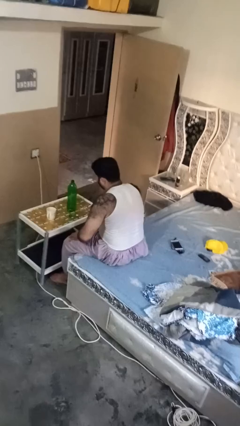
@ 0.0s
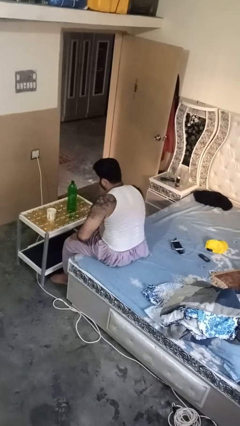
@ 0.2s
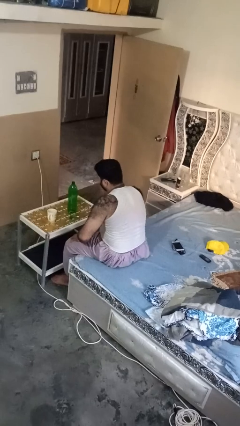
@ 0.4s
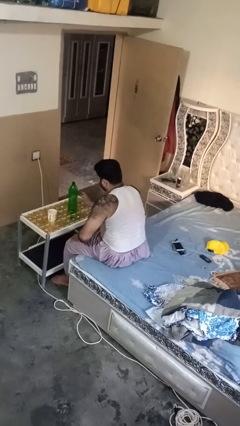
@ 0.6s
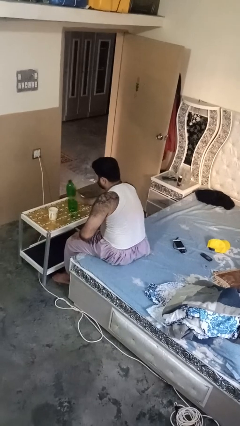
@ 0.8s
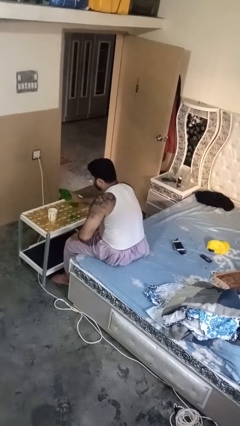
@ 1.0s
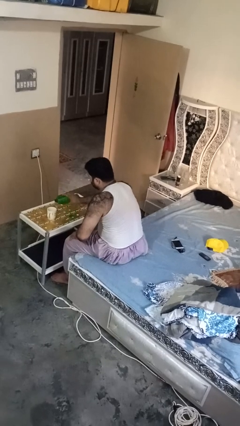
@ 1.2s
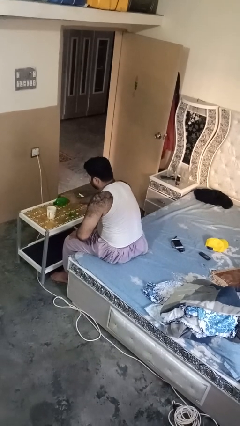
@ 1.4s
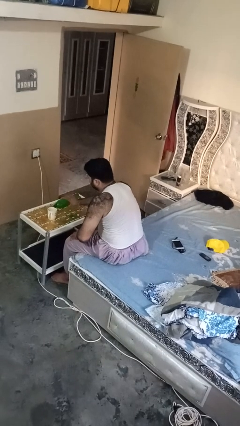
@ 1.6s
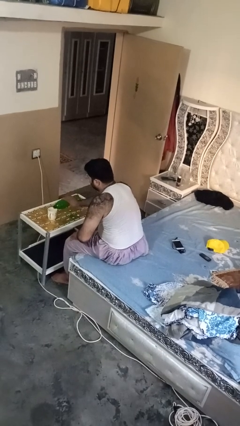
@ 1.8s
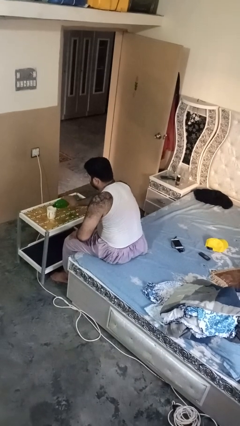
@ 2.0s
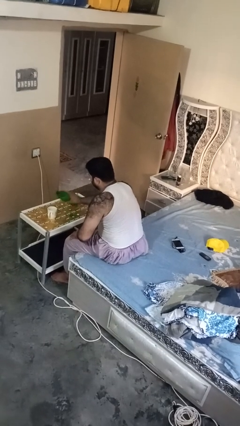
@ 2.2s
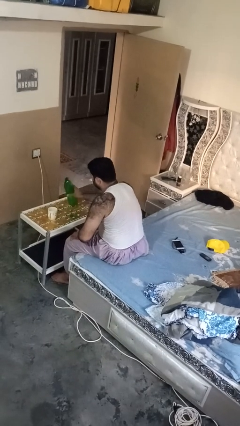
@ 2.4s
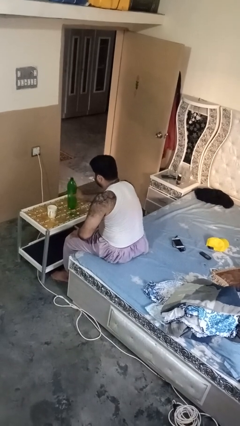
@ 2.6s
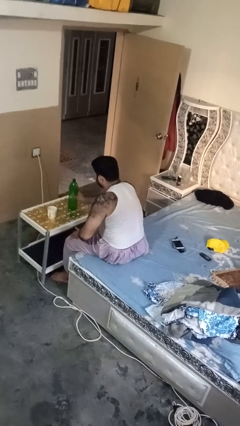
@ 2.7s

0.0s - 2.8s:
person pours liquid into cup

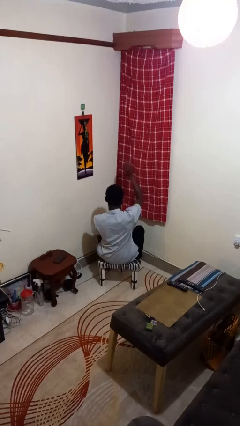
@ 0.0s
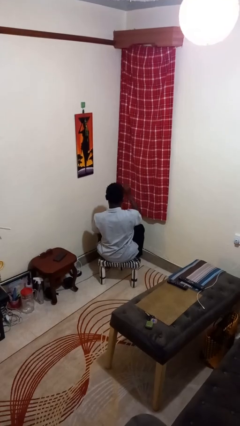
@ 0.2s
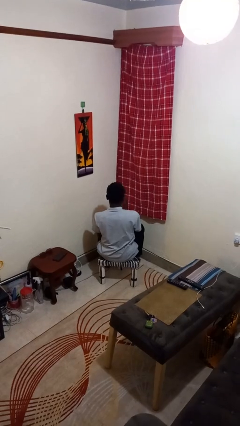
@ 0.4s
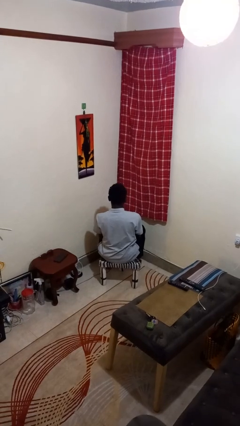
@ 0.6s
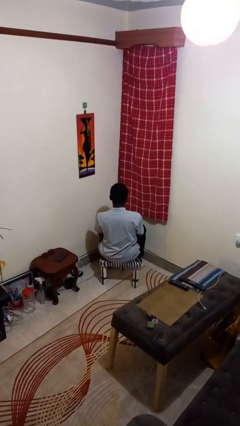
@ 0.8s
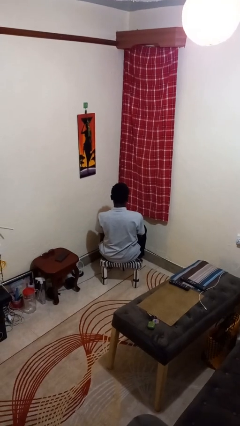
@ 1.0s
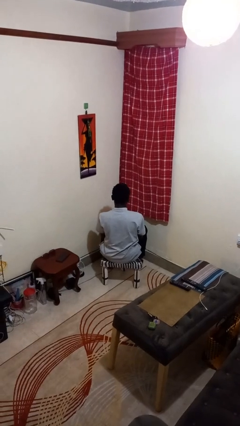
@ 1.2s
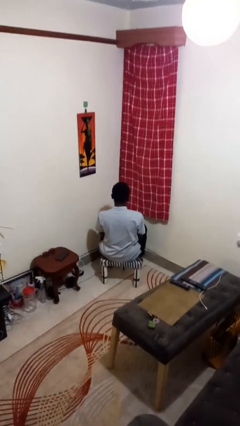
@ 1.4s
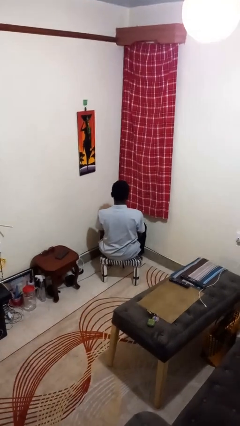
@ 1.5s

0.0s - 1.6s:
person gestures lower hand

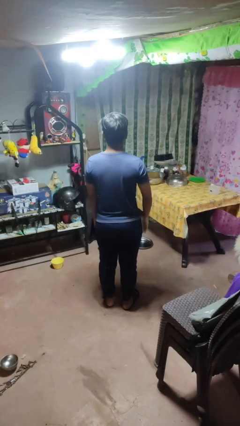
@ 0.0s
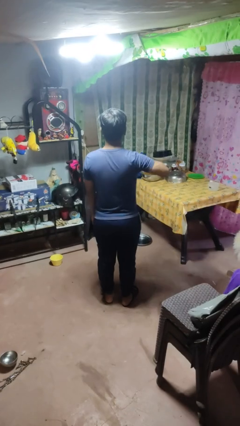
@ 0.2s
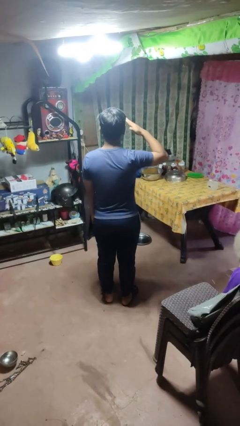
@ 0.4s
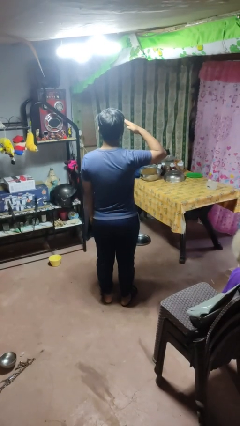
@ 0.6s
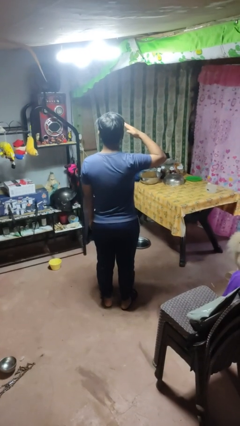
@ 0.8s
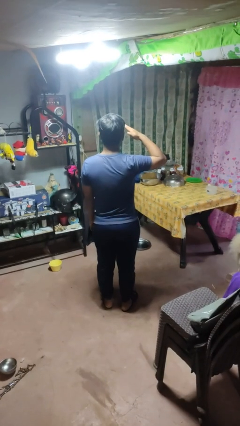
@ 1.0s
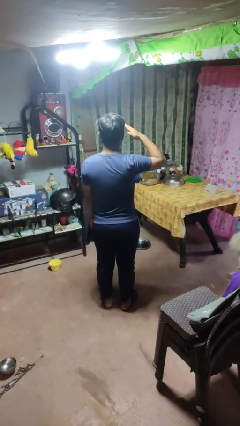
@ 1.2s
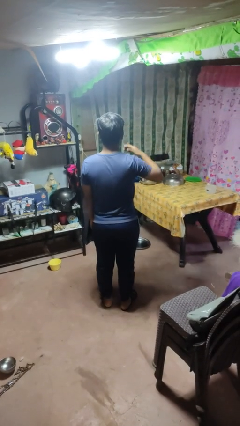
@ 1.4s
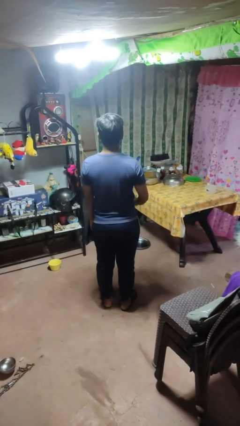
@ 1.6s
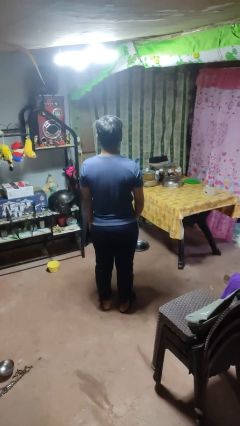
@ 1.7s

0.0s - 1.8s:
person salutes

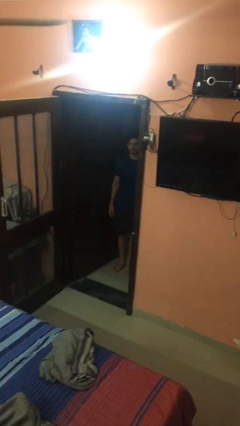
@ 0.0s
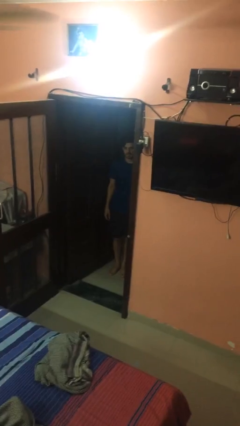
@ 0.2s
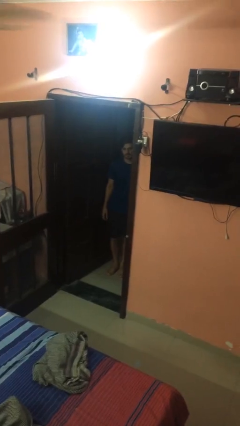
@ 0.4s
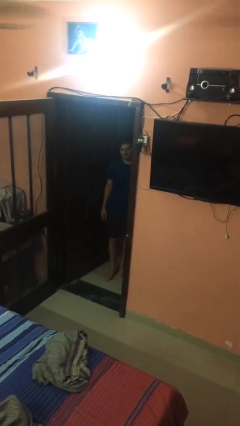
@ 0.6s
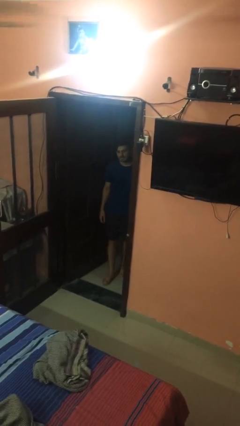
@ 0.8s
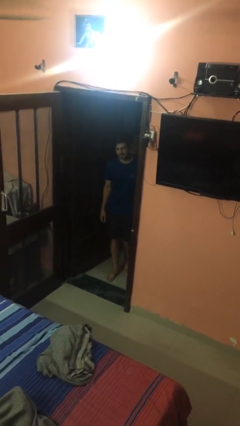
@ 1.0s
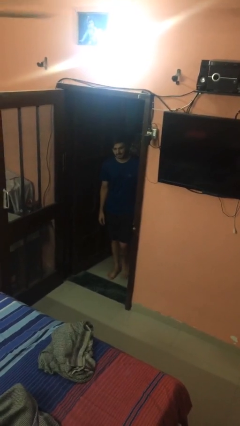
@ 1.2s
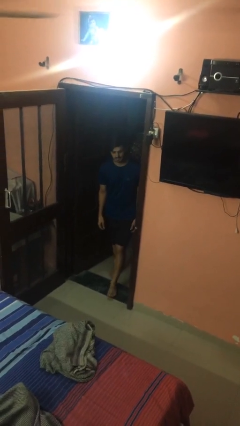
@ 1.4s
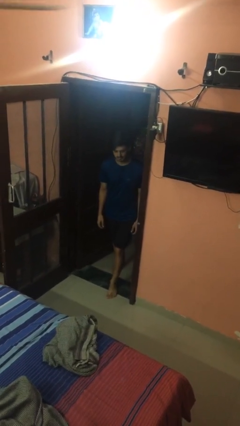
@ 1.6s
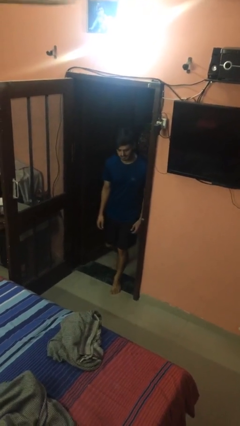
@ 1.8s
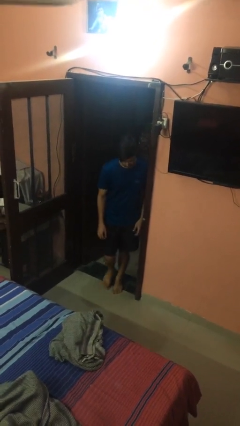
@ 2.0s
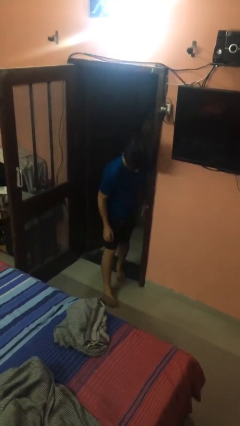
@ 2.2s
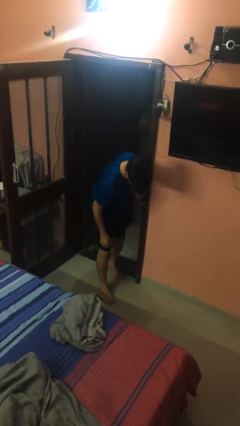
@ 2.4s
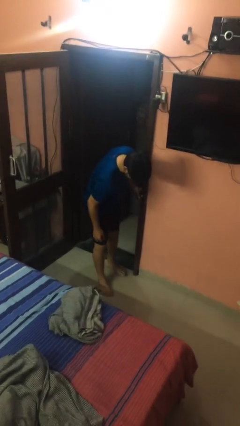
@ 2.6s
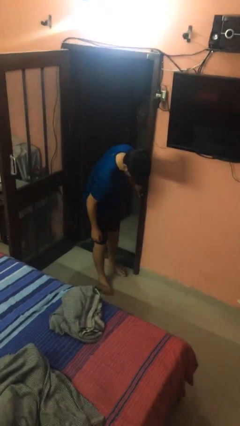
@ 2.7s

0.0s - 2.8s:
person bumps into wall

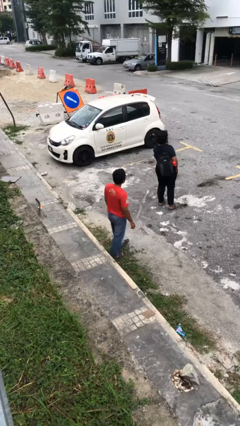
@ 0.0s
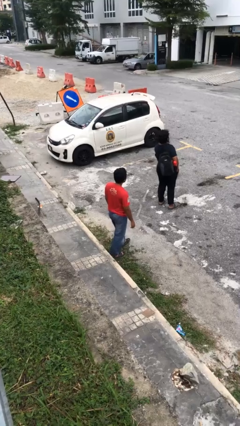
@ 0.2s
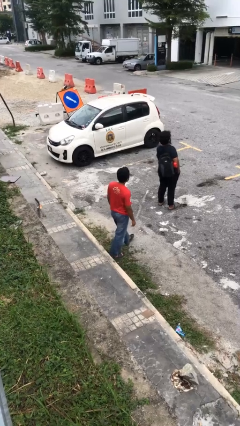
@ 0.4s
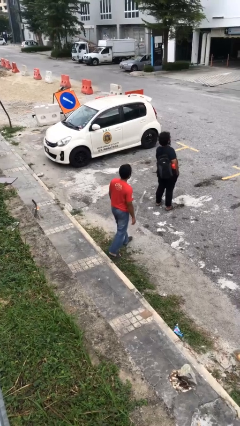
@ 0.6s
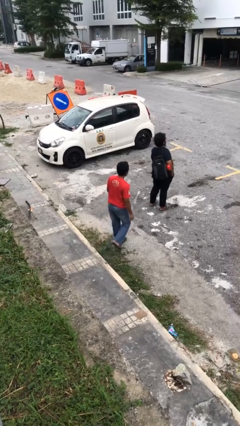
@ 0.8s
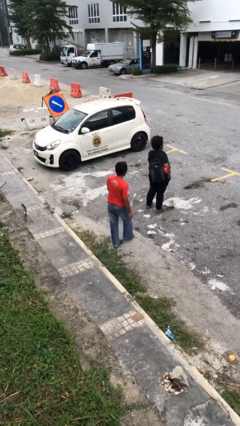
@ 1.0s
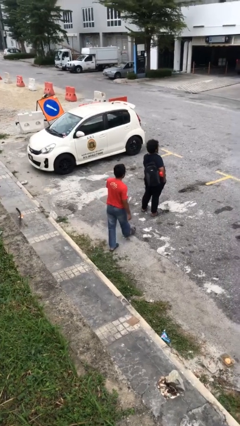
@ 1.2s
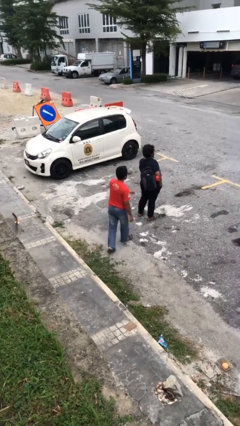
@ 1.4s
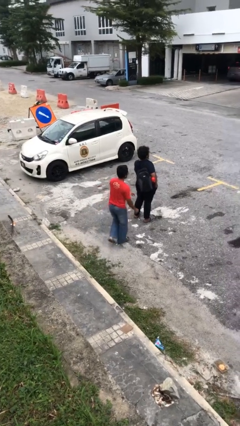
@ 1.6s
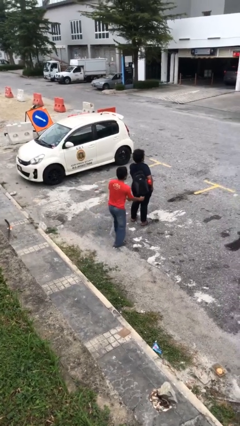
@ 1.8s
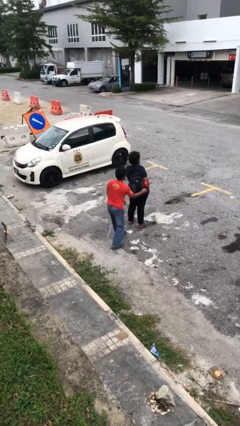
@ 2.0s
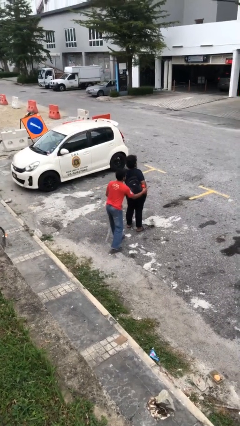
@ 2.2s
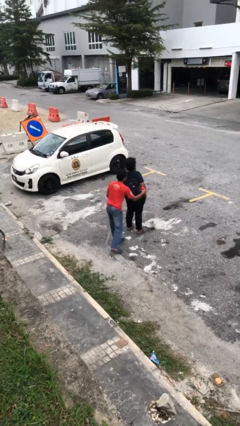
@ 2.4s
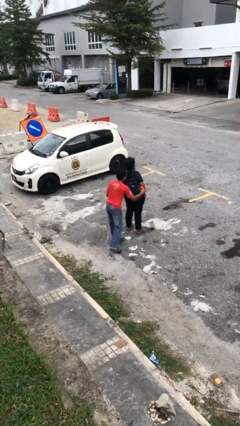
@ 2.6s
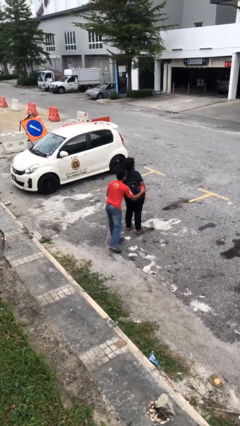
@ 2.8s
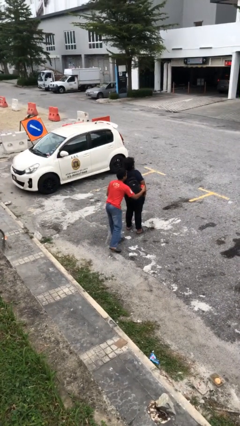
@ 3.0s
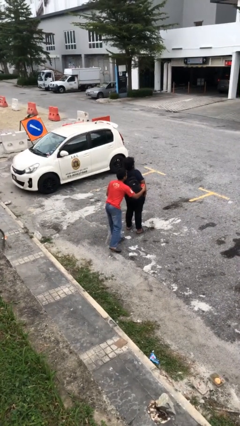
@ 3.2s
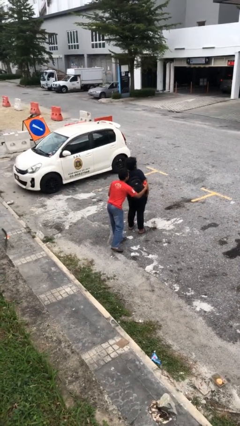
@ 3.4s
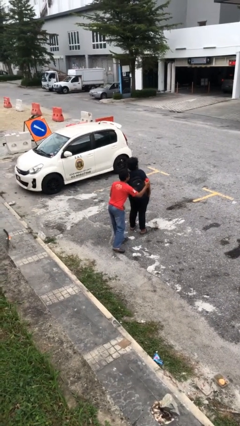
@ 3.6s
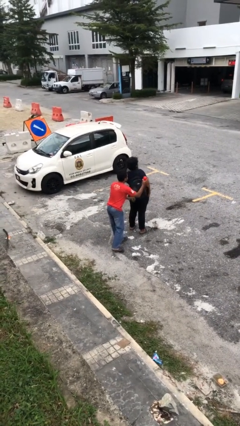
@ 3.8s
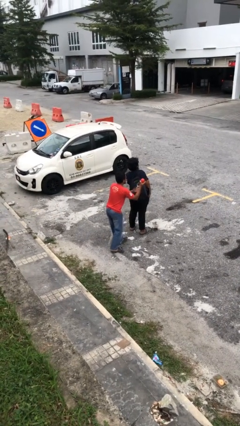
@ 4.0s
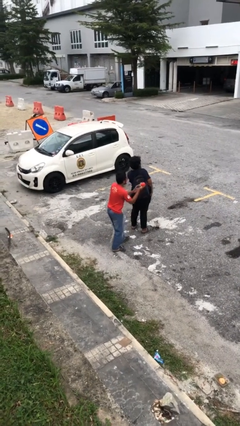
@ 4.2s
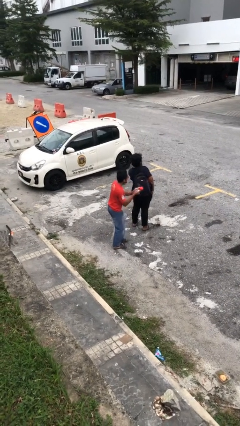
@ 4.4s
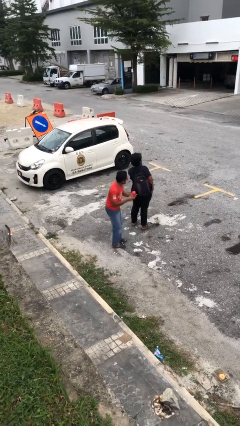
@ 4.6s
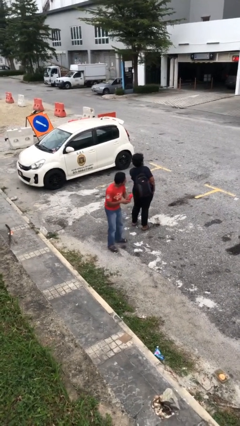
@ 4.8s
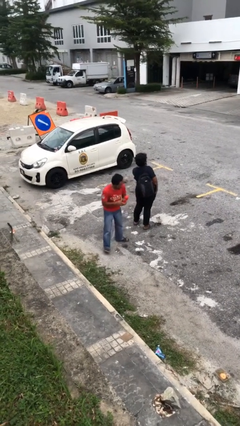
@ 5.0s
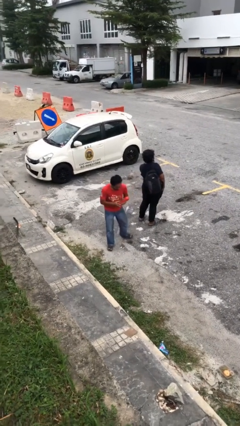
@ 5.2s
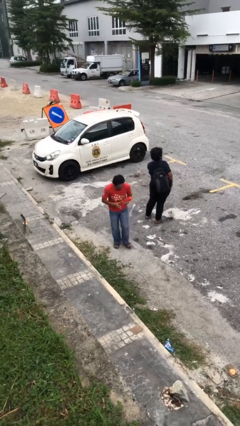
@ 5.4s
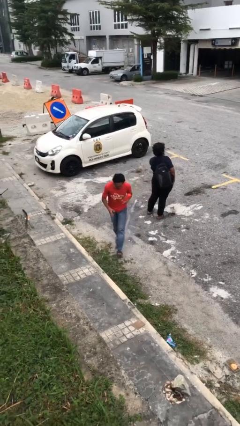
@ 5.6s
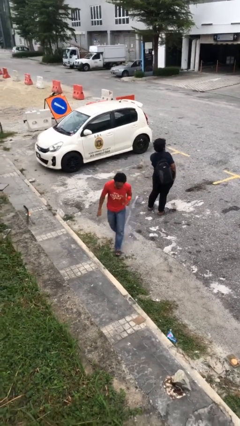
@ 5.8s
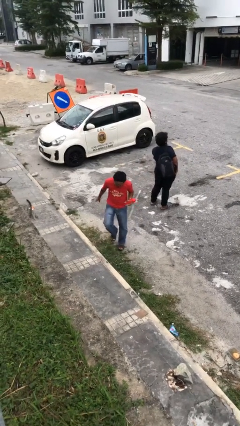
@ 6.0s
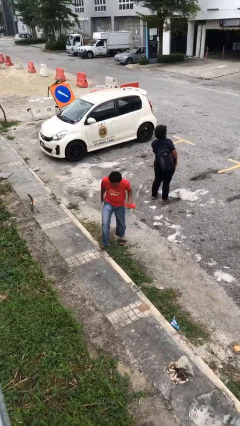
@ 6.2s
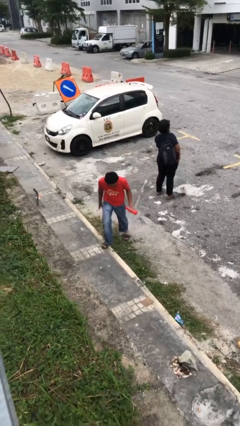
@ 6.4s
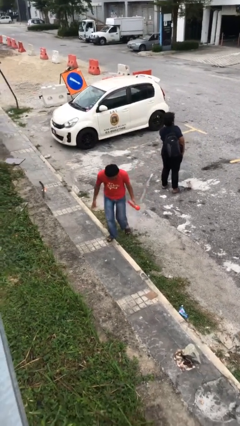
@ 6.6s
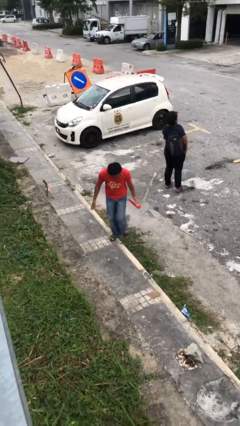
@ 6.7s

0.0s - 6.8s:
person steals object from person

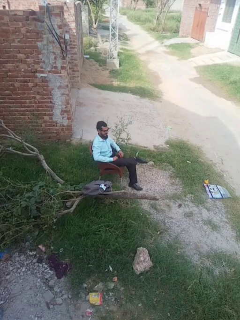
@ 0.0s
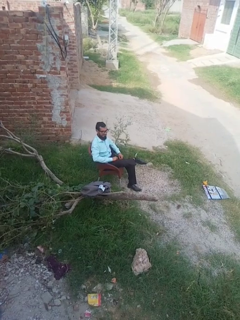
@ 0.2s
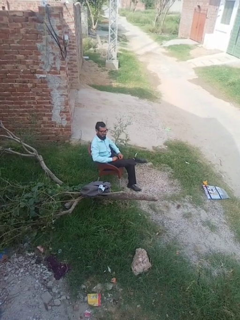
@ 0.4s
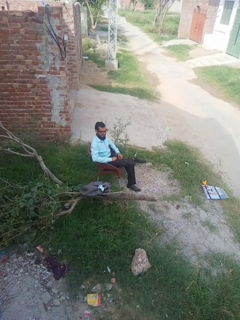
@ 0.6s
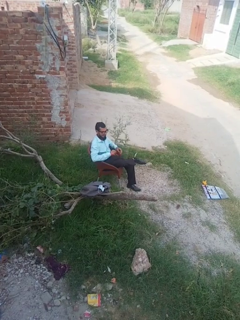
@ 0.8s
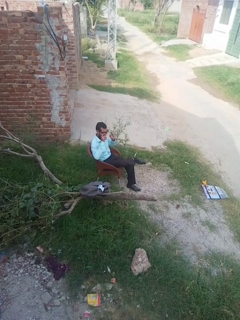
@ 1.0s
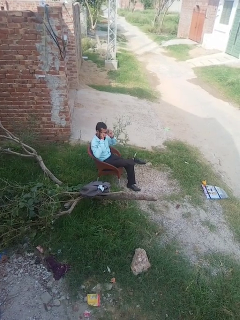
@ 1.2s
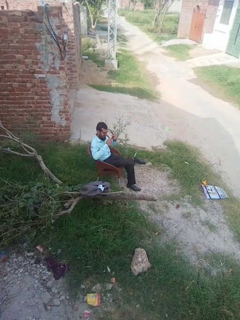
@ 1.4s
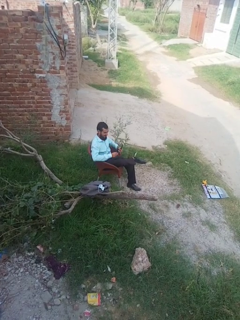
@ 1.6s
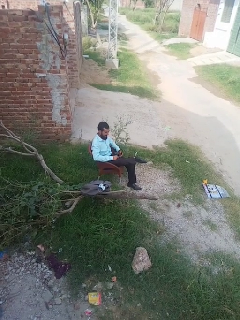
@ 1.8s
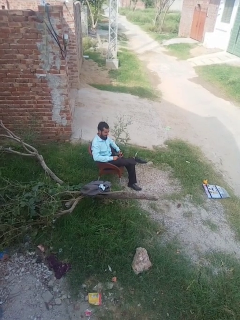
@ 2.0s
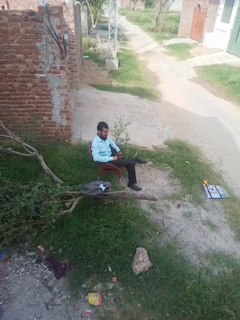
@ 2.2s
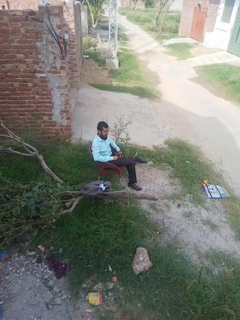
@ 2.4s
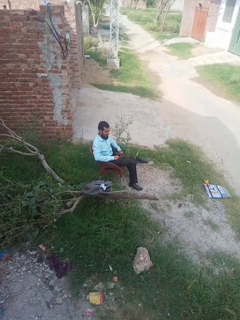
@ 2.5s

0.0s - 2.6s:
person takes off glasses
